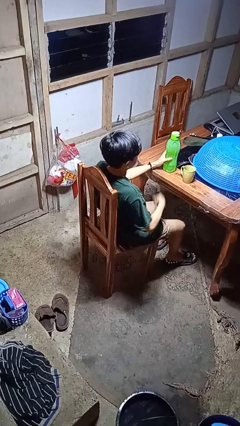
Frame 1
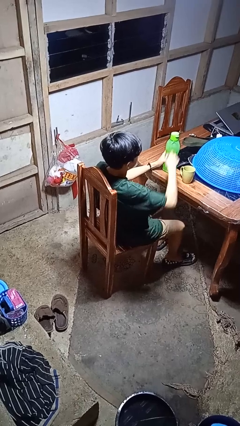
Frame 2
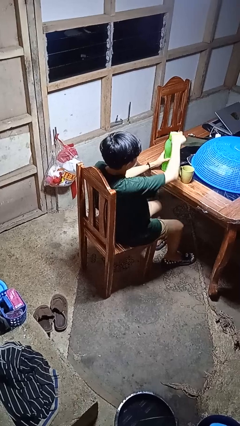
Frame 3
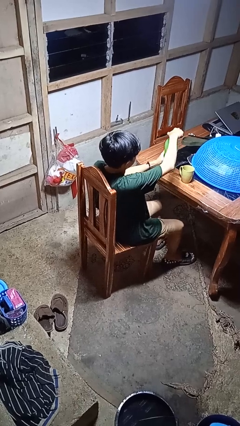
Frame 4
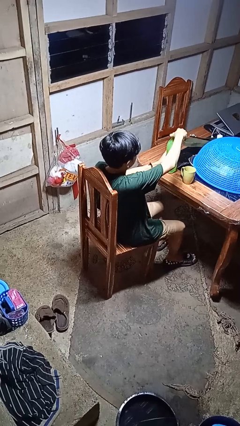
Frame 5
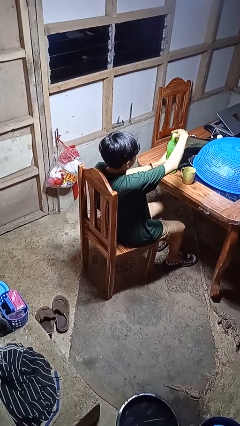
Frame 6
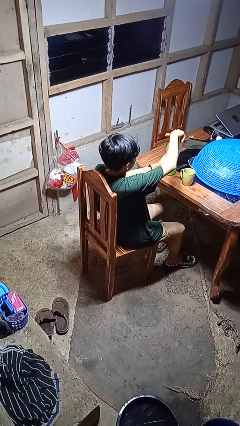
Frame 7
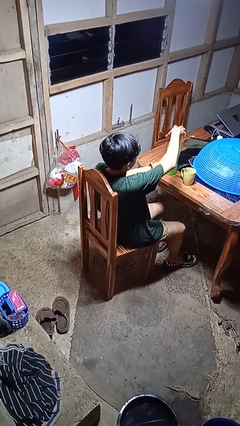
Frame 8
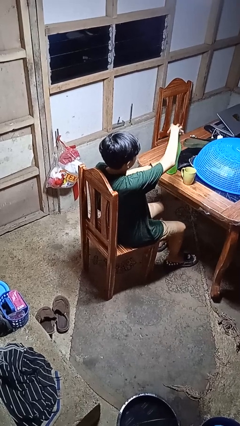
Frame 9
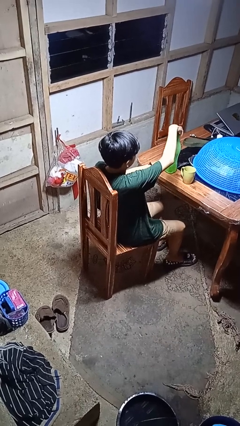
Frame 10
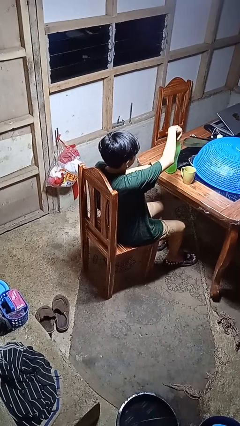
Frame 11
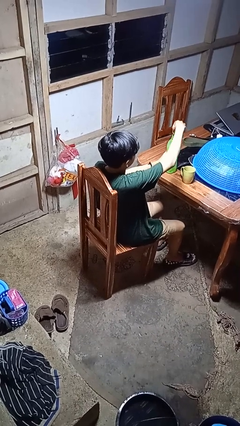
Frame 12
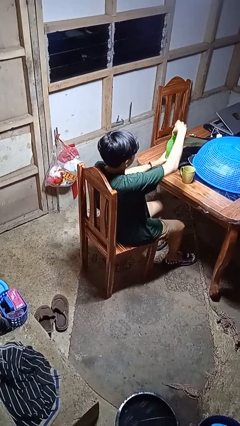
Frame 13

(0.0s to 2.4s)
person unscrews lid from bottle

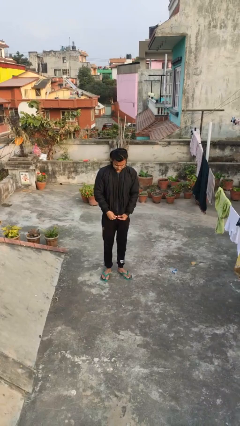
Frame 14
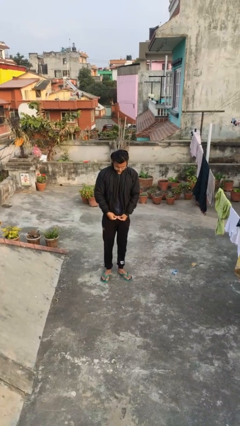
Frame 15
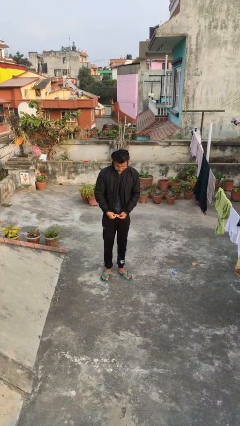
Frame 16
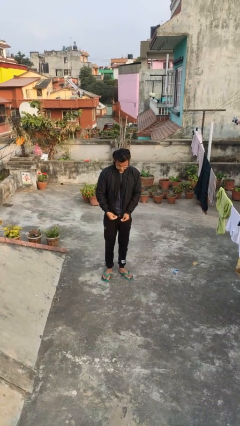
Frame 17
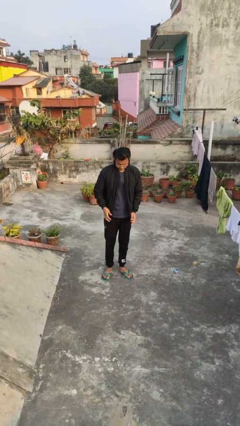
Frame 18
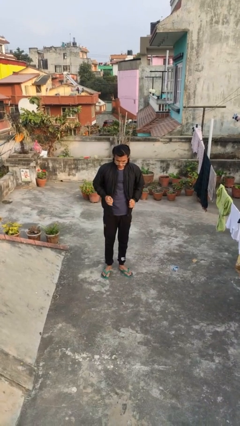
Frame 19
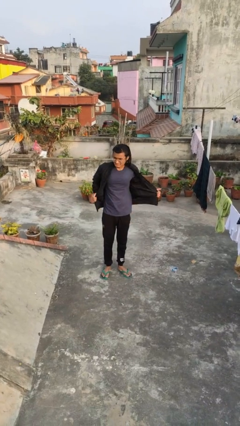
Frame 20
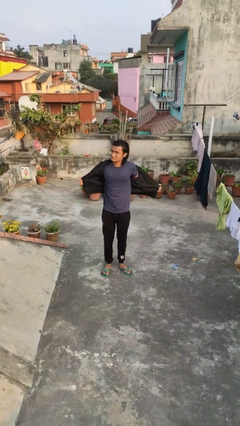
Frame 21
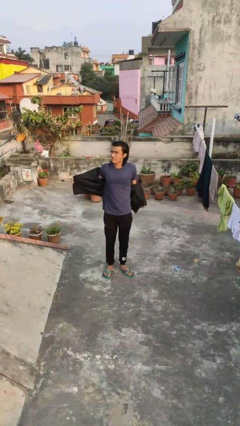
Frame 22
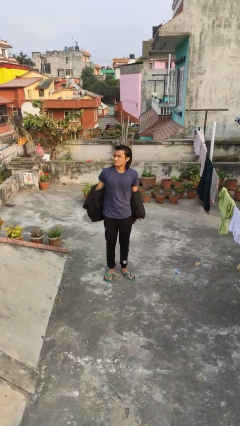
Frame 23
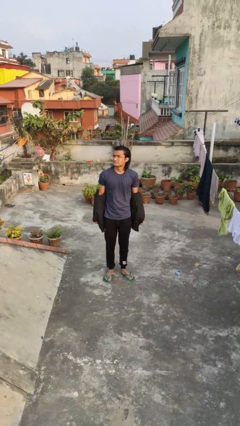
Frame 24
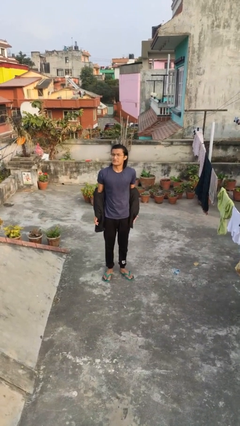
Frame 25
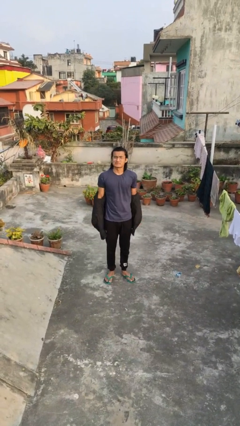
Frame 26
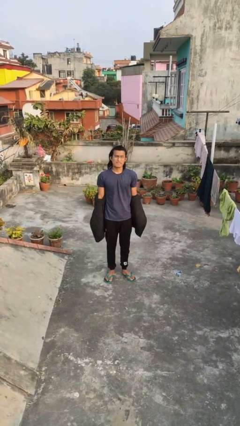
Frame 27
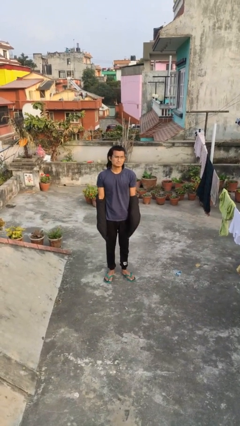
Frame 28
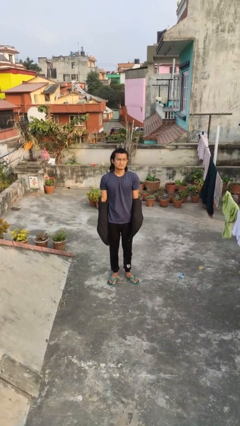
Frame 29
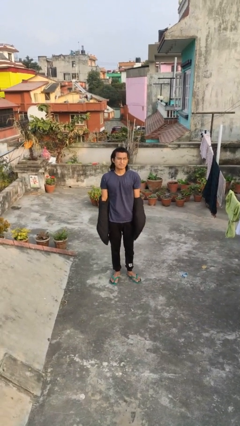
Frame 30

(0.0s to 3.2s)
person takes off jacket

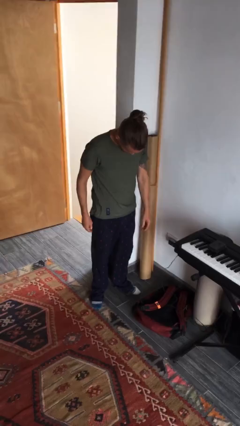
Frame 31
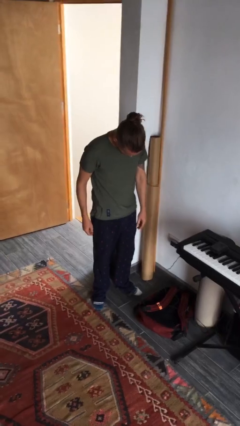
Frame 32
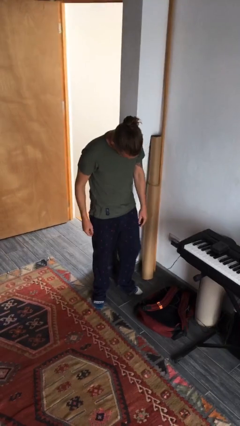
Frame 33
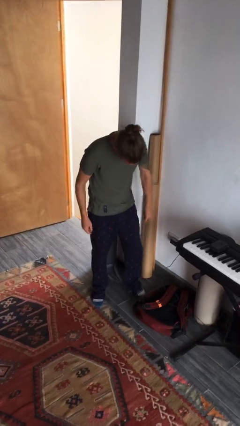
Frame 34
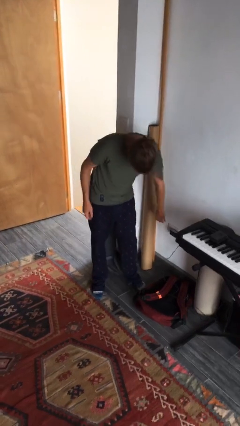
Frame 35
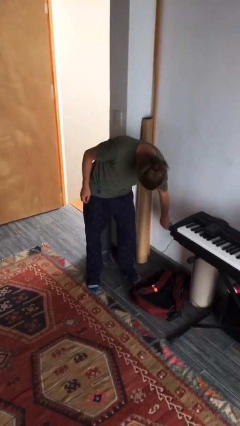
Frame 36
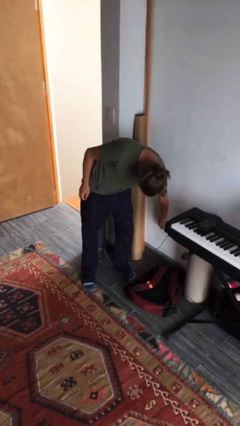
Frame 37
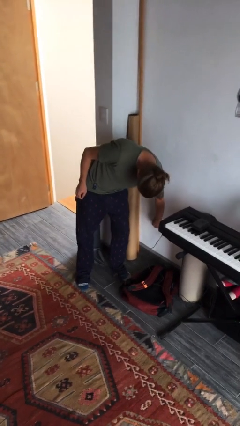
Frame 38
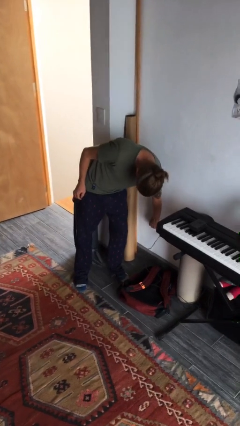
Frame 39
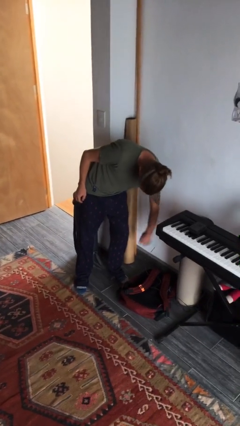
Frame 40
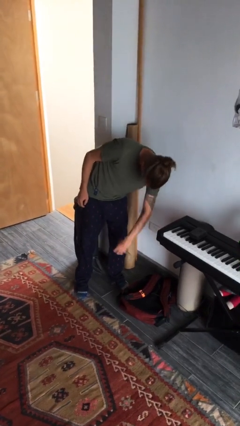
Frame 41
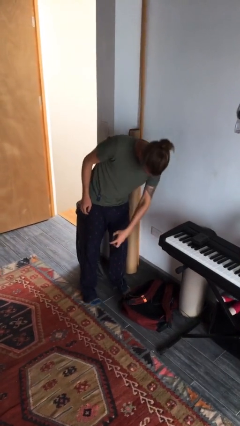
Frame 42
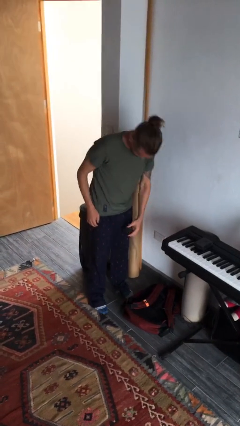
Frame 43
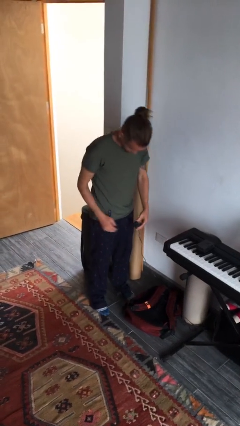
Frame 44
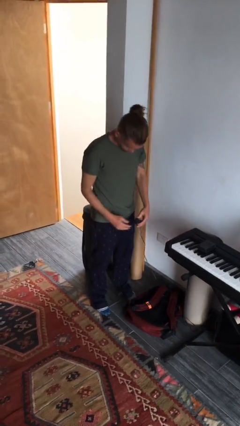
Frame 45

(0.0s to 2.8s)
person unplugs from electrical socket

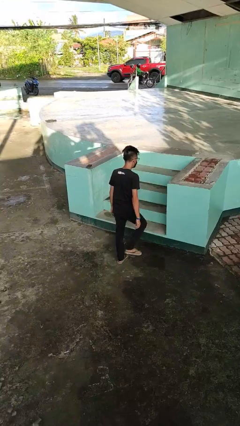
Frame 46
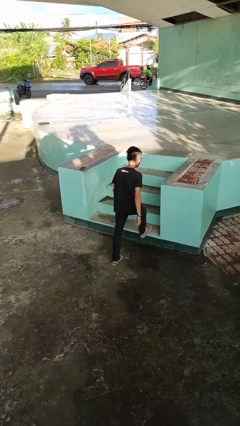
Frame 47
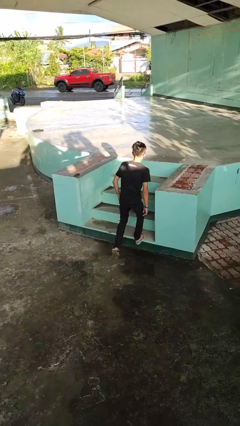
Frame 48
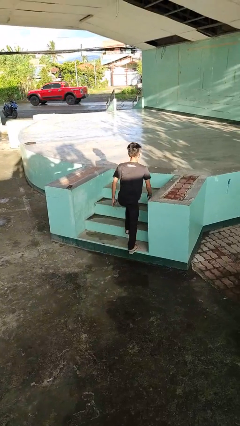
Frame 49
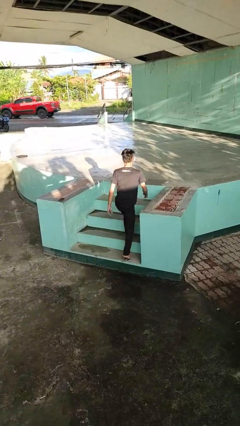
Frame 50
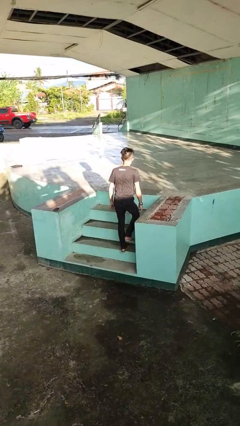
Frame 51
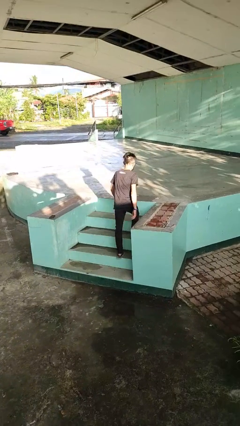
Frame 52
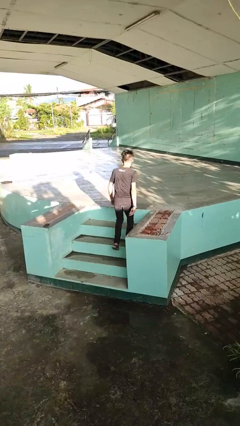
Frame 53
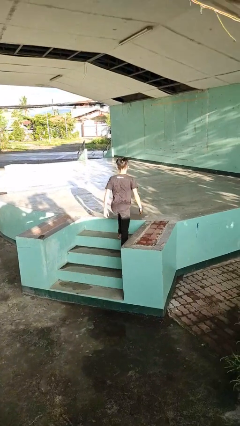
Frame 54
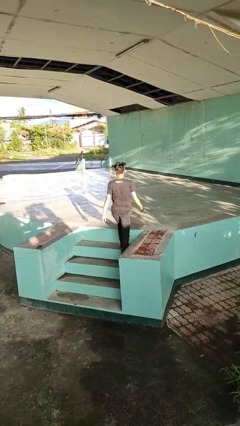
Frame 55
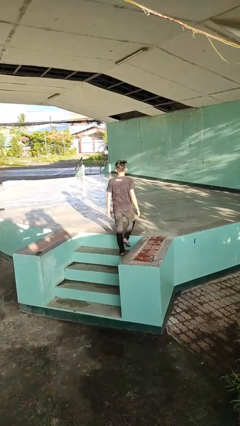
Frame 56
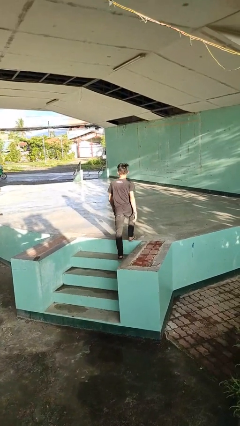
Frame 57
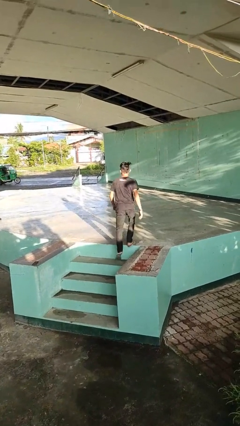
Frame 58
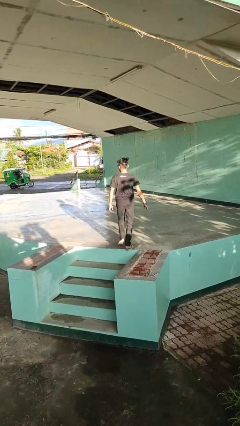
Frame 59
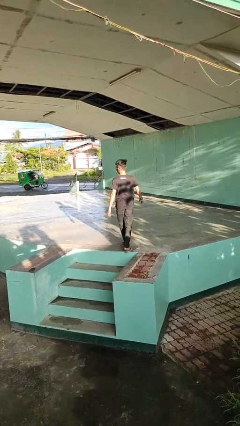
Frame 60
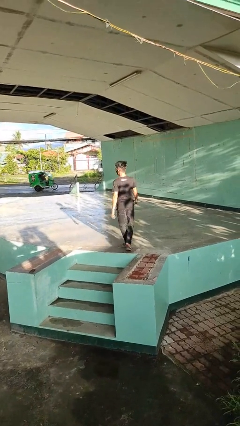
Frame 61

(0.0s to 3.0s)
person climbs up stairs

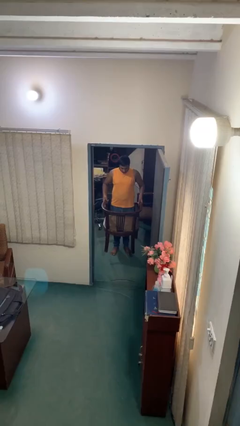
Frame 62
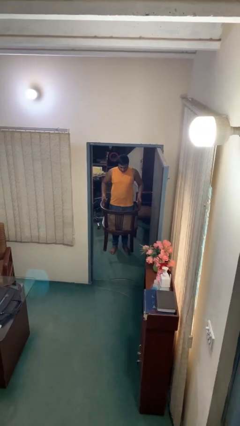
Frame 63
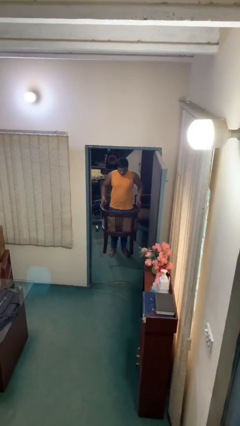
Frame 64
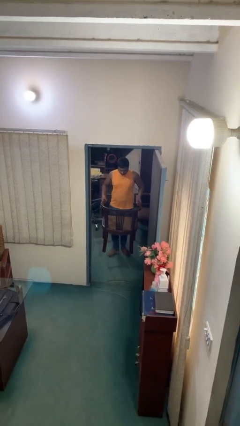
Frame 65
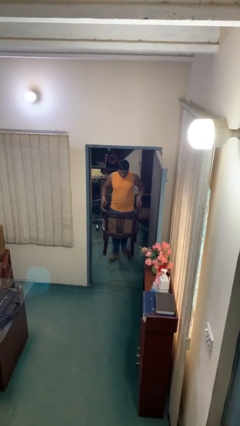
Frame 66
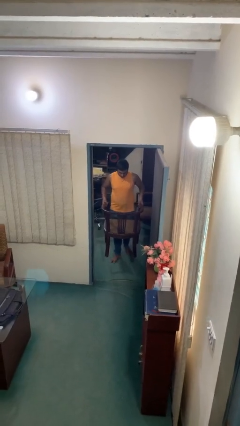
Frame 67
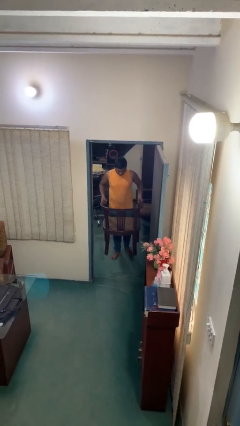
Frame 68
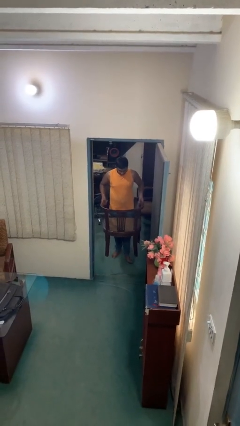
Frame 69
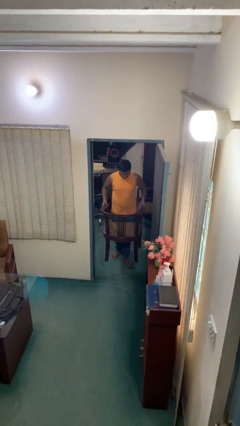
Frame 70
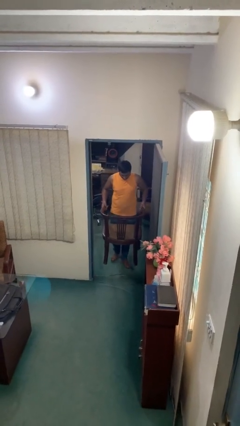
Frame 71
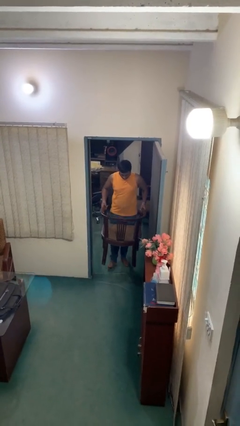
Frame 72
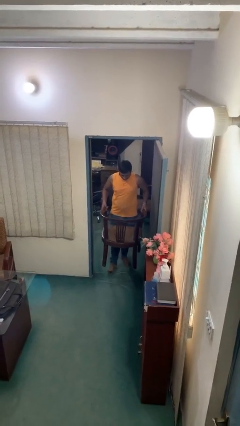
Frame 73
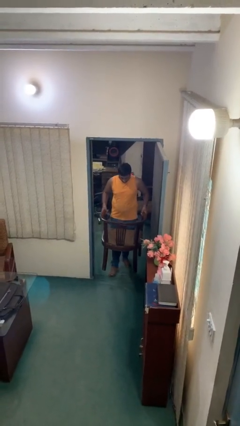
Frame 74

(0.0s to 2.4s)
person carries heavy object

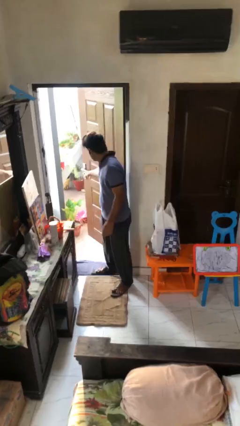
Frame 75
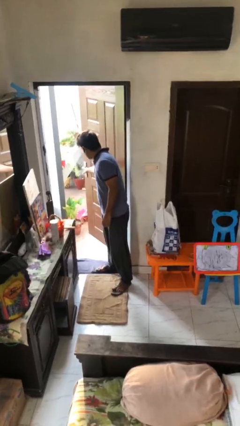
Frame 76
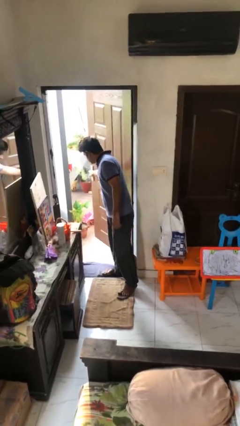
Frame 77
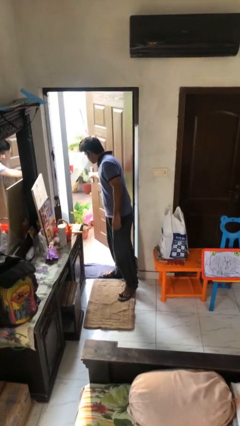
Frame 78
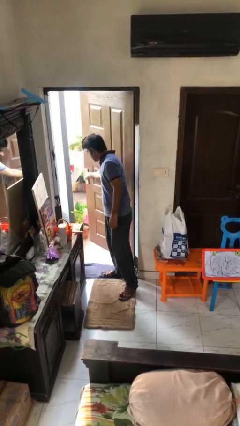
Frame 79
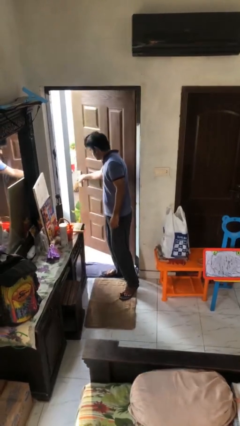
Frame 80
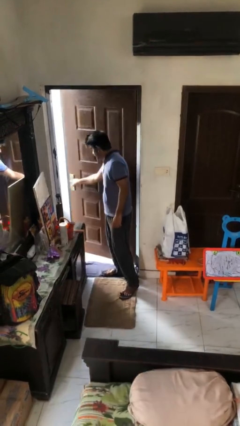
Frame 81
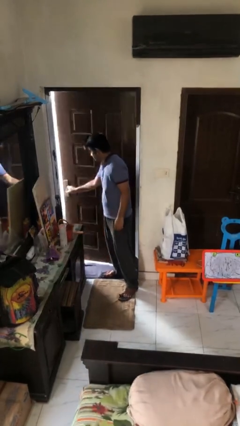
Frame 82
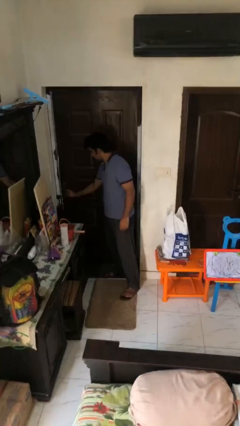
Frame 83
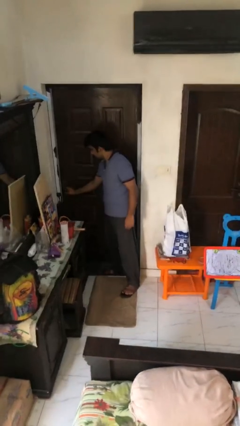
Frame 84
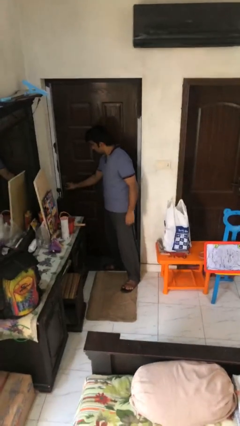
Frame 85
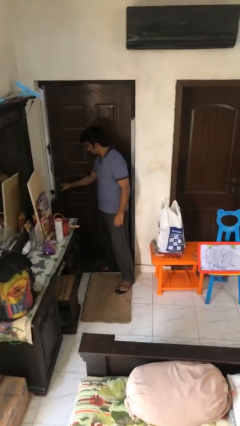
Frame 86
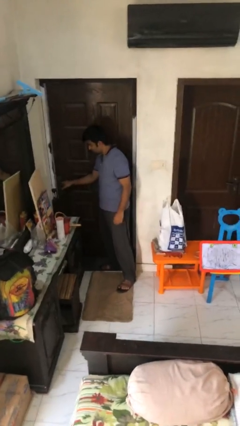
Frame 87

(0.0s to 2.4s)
person closes facility door

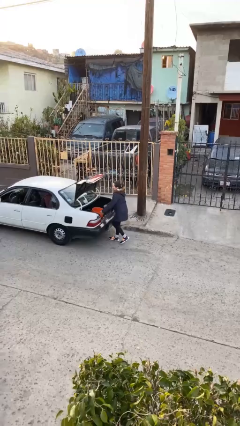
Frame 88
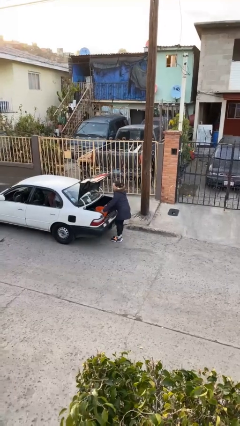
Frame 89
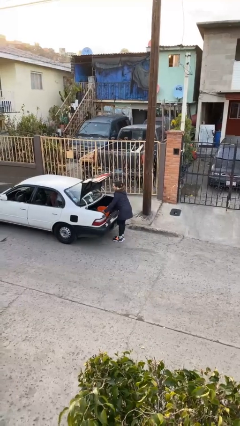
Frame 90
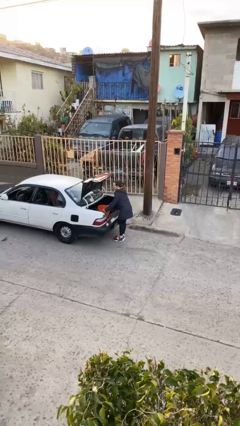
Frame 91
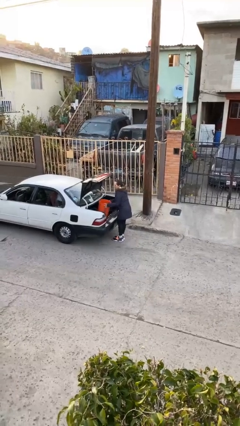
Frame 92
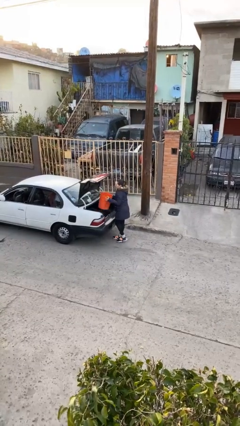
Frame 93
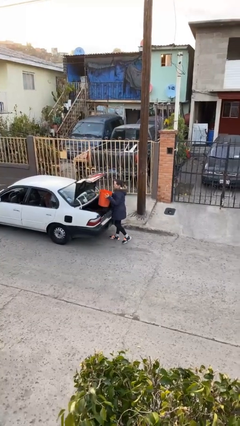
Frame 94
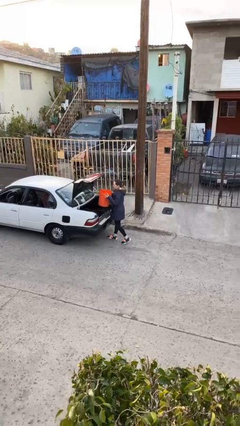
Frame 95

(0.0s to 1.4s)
person unloads car
